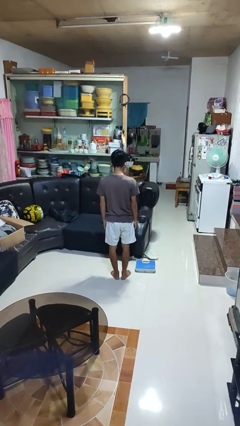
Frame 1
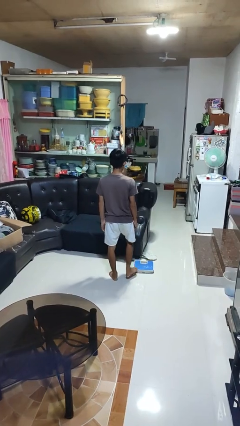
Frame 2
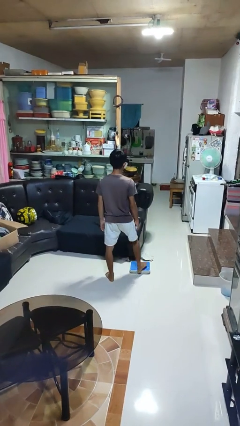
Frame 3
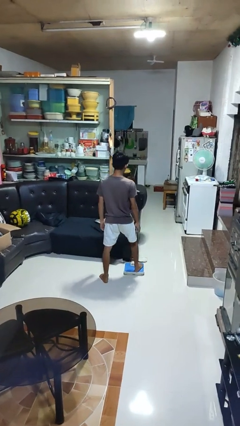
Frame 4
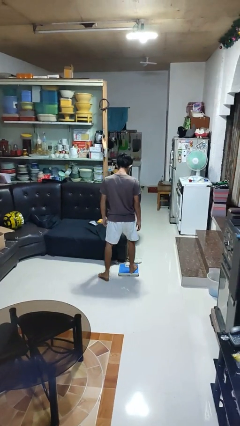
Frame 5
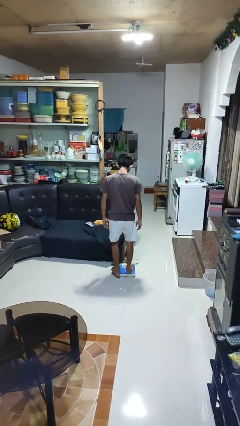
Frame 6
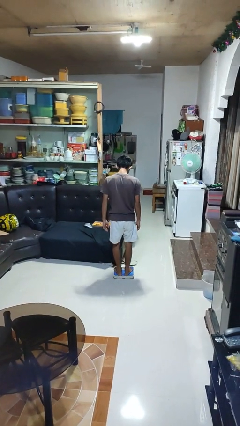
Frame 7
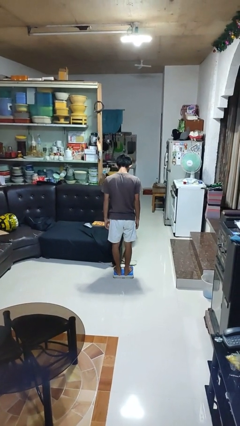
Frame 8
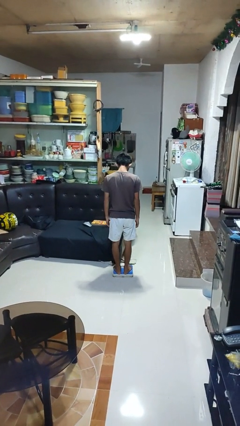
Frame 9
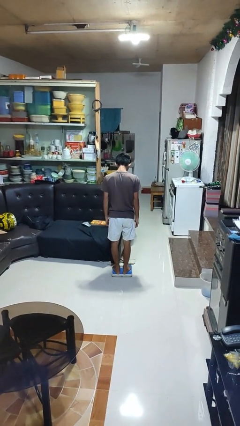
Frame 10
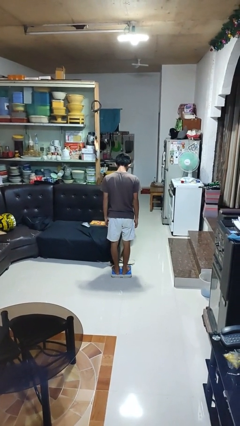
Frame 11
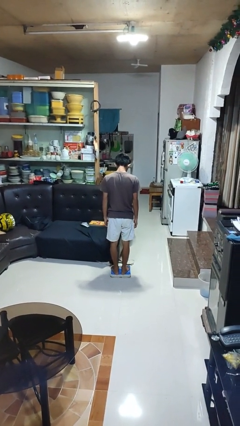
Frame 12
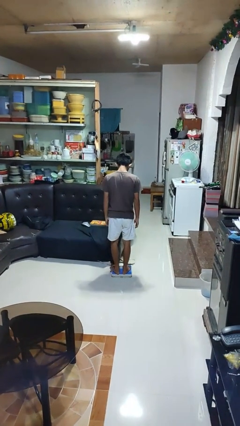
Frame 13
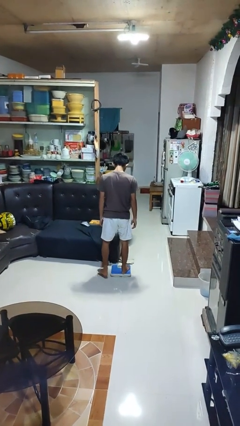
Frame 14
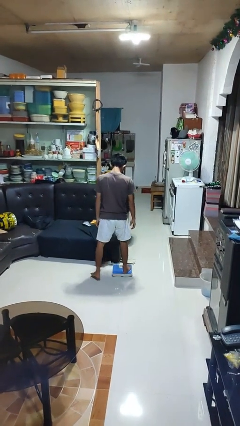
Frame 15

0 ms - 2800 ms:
person uses bodyweight scale

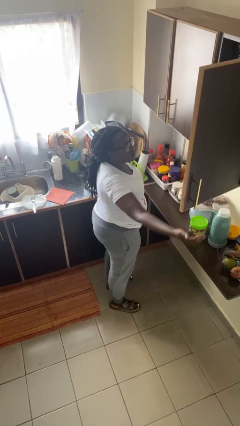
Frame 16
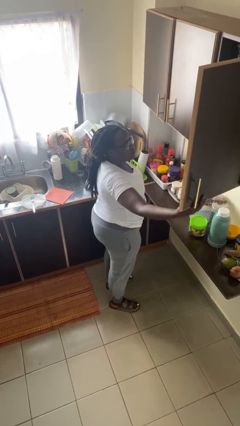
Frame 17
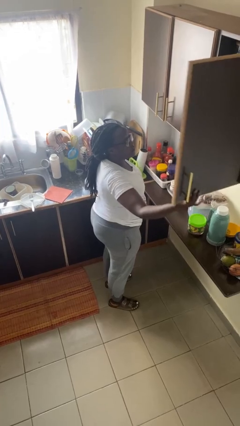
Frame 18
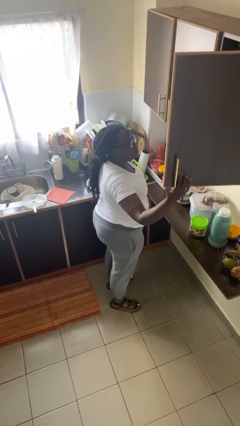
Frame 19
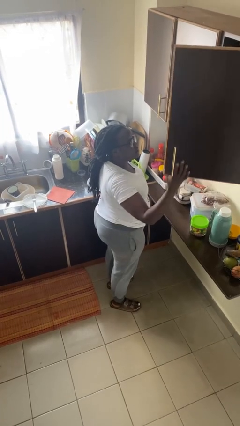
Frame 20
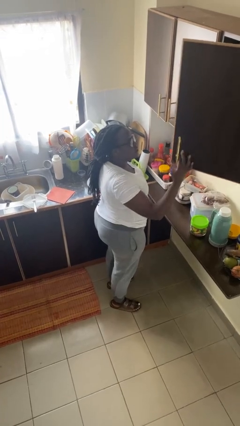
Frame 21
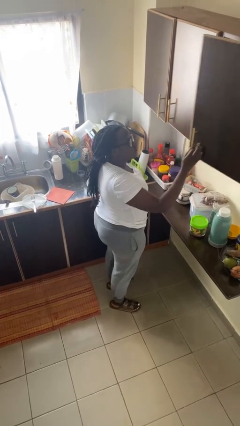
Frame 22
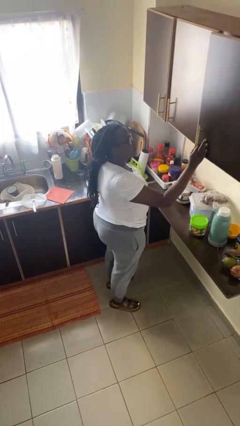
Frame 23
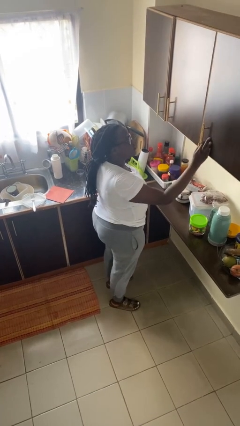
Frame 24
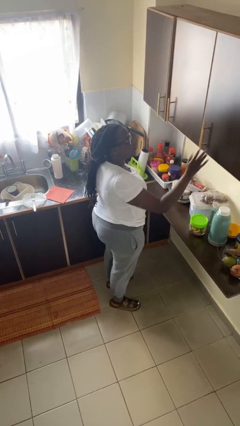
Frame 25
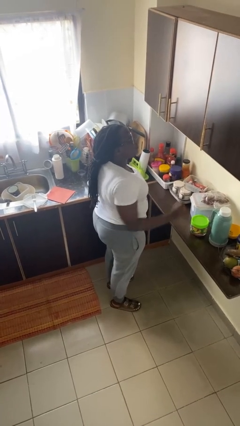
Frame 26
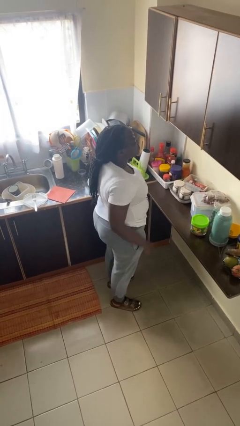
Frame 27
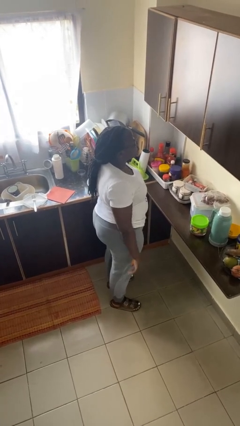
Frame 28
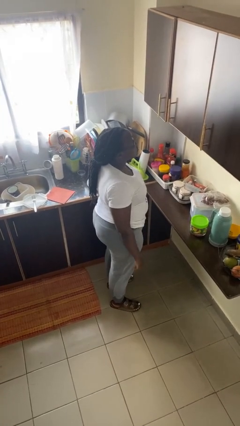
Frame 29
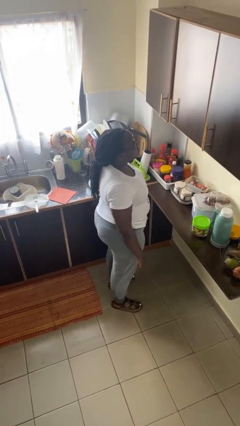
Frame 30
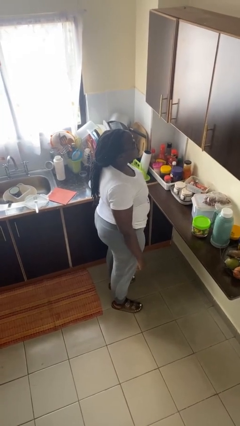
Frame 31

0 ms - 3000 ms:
person closes cabinet

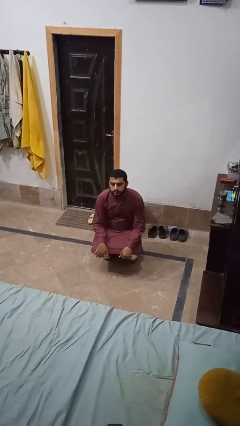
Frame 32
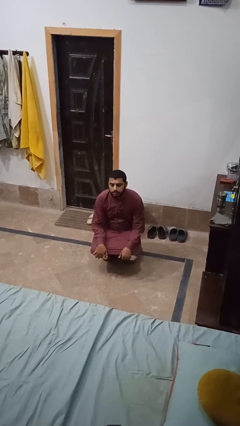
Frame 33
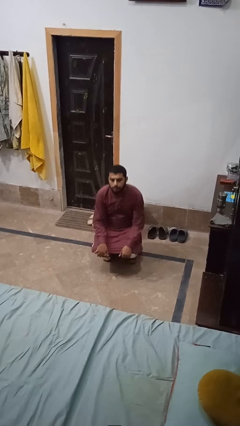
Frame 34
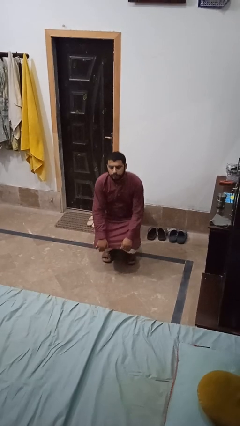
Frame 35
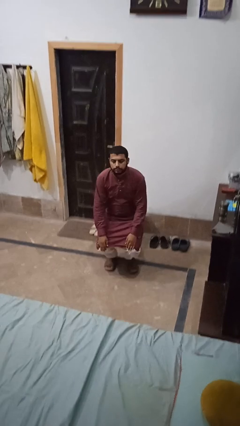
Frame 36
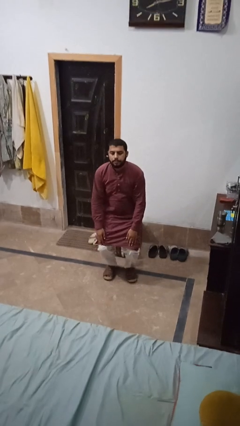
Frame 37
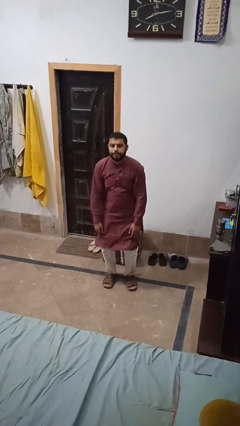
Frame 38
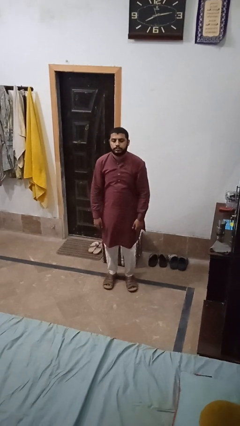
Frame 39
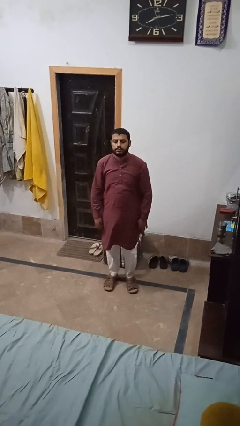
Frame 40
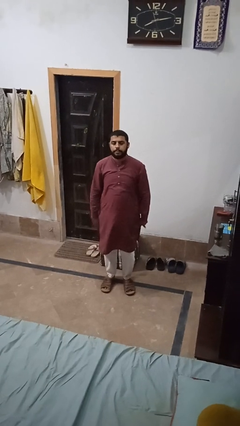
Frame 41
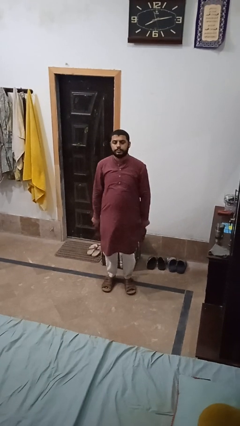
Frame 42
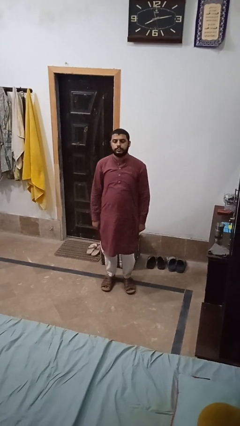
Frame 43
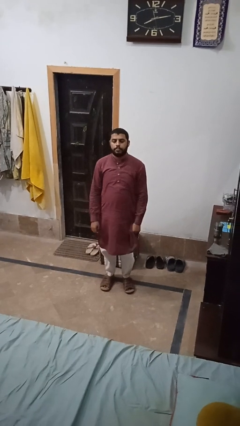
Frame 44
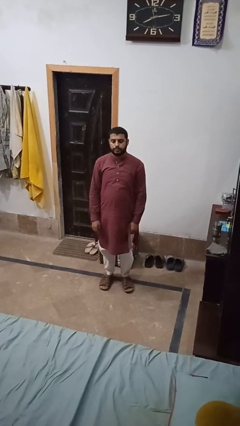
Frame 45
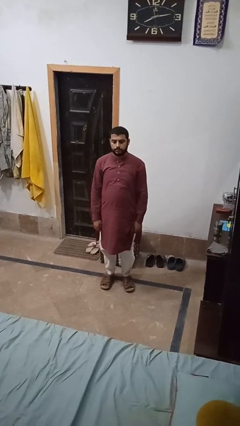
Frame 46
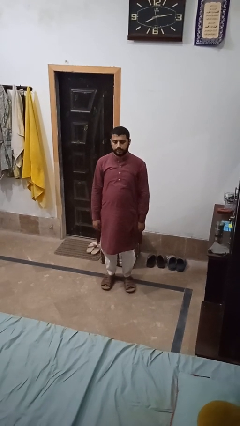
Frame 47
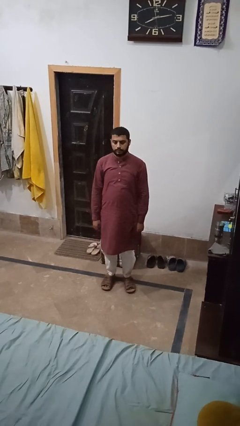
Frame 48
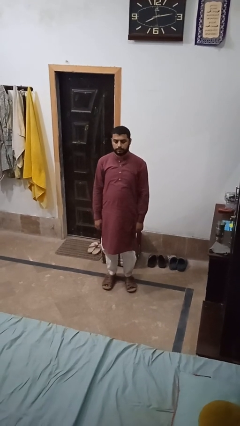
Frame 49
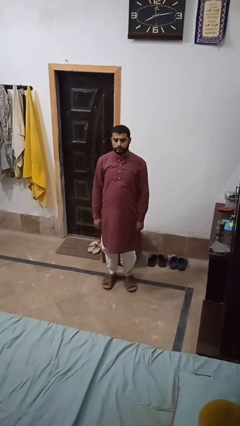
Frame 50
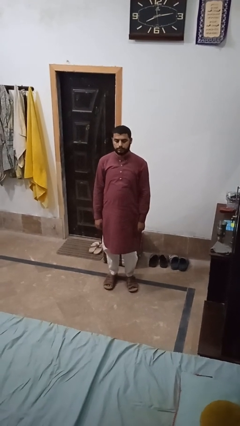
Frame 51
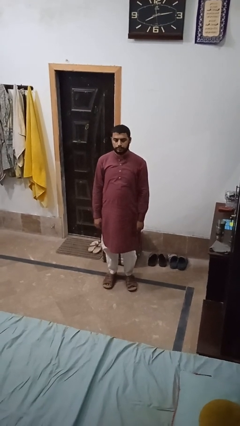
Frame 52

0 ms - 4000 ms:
person stands up

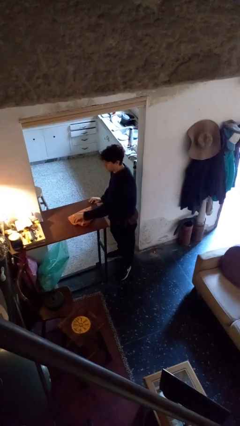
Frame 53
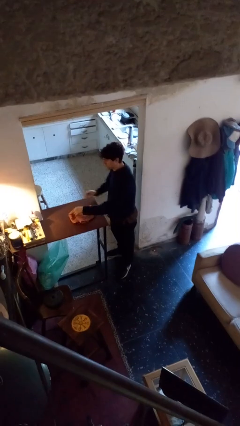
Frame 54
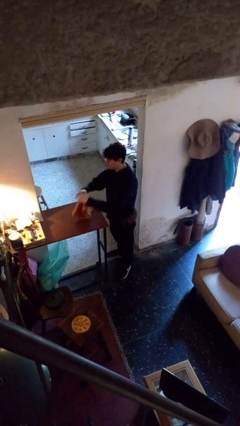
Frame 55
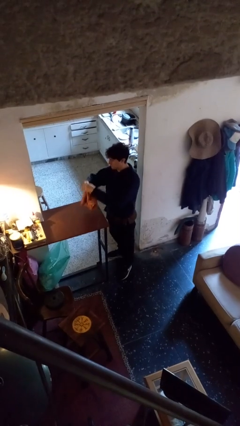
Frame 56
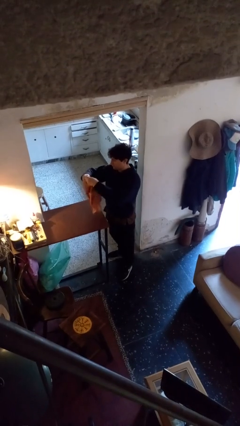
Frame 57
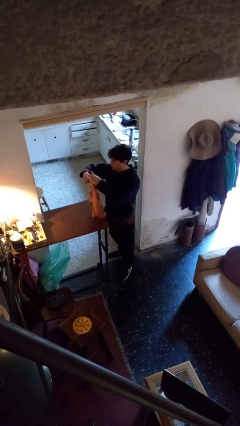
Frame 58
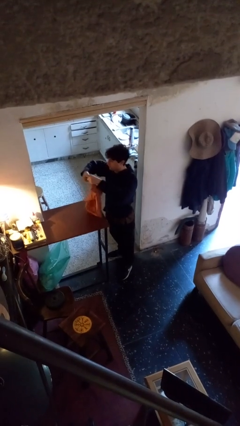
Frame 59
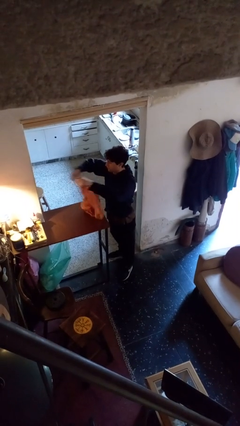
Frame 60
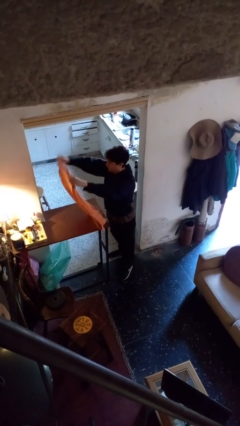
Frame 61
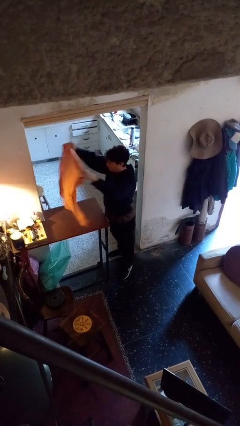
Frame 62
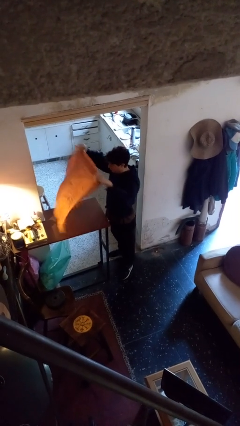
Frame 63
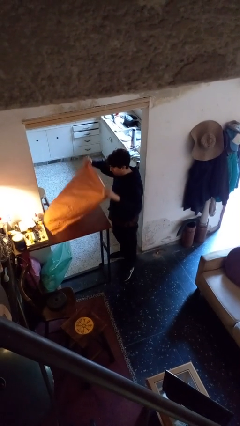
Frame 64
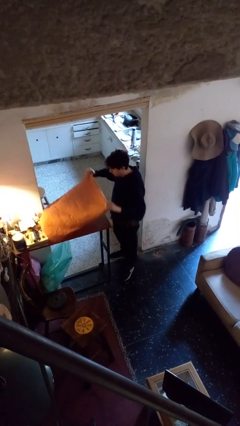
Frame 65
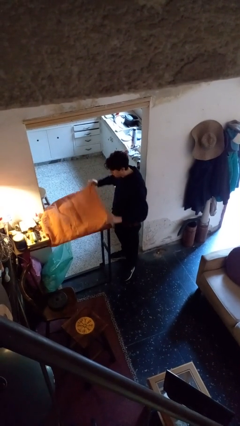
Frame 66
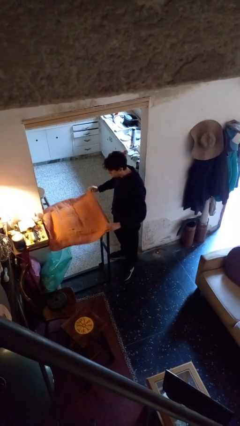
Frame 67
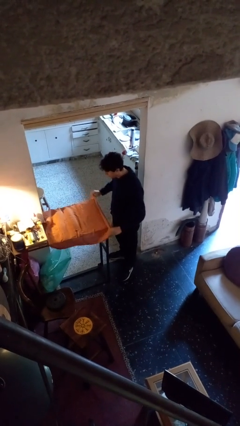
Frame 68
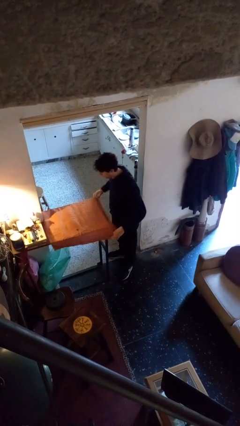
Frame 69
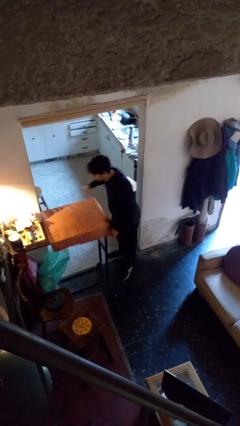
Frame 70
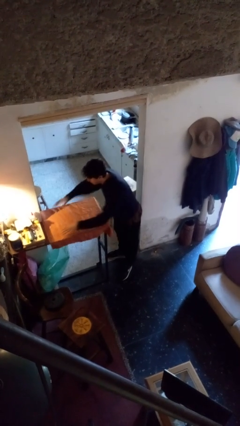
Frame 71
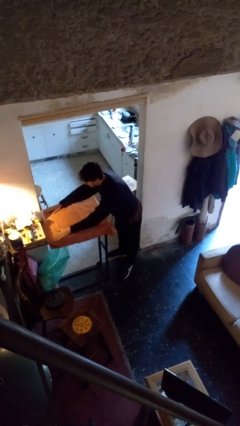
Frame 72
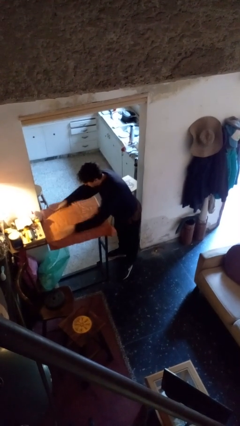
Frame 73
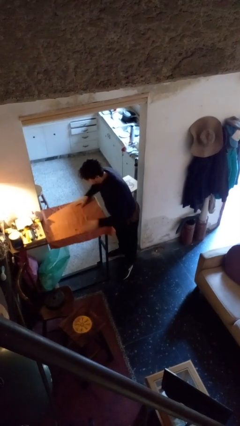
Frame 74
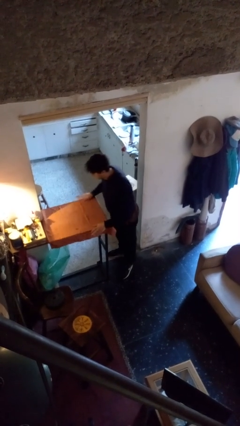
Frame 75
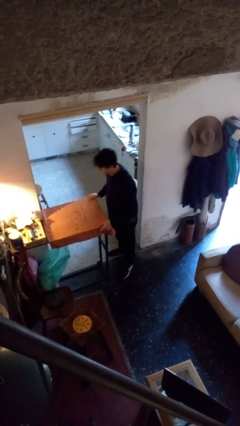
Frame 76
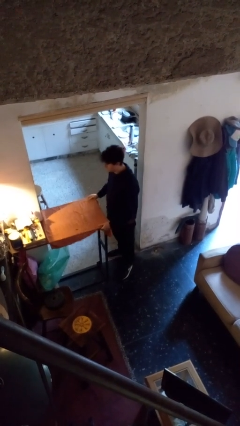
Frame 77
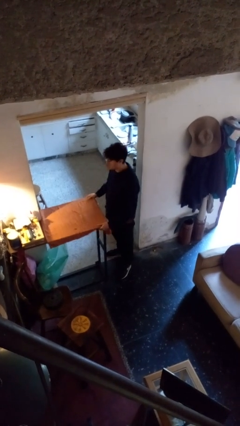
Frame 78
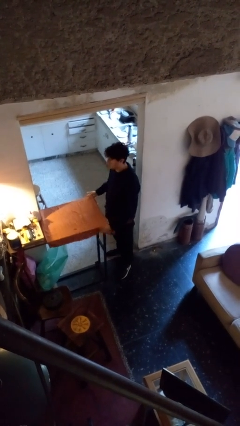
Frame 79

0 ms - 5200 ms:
person spreads tablecloth

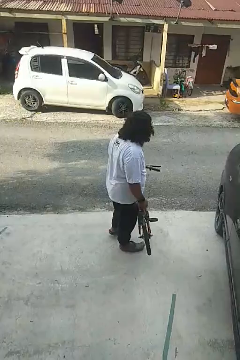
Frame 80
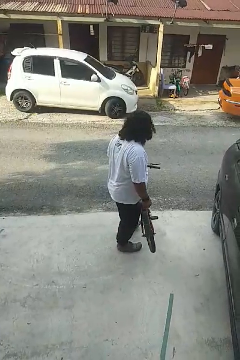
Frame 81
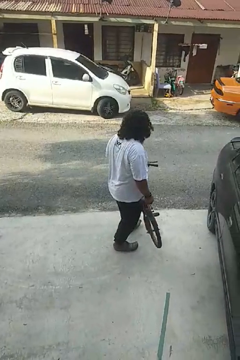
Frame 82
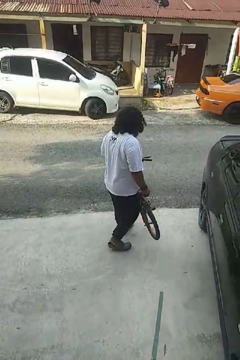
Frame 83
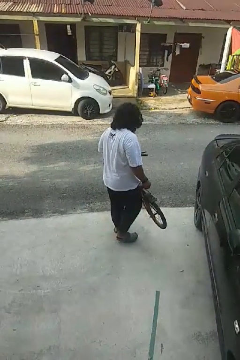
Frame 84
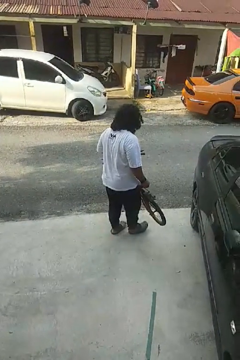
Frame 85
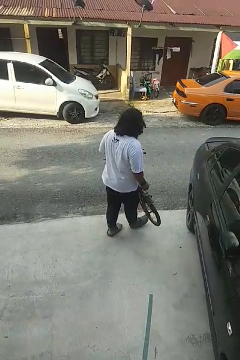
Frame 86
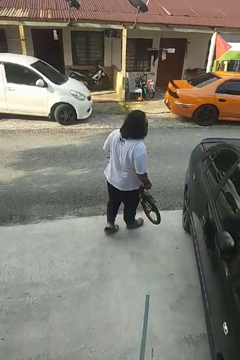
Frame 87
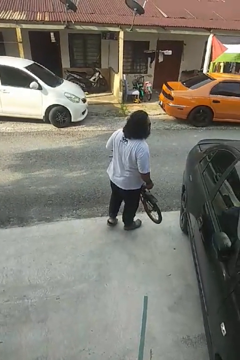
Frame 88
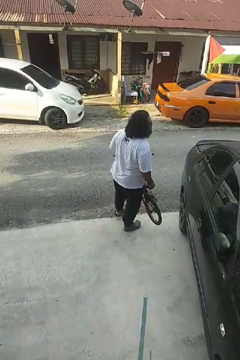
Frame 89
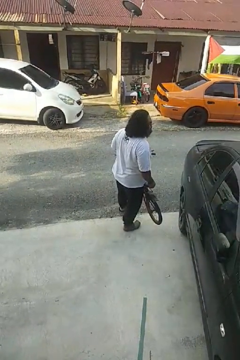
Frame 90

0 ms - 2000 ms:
person carries bicycle

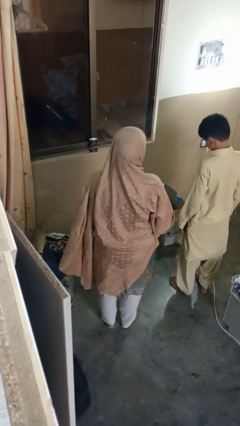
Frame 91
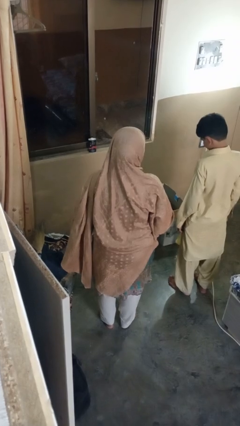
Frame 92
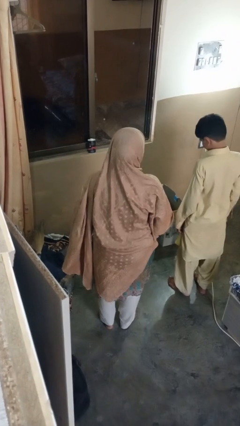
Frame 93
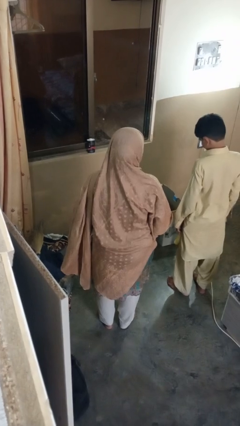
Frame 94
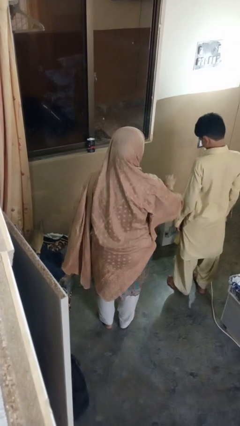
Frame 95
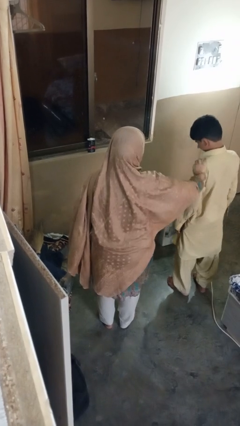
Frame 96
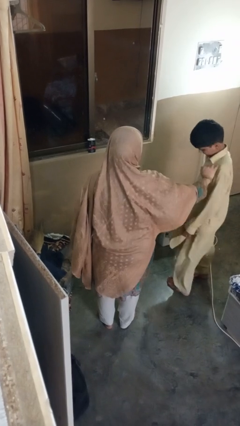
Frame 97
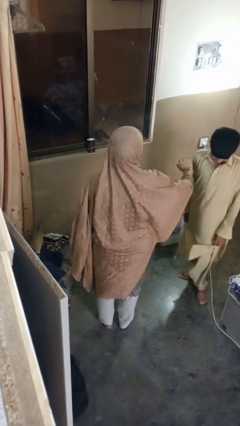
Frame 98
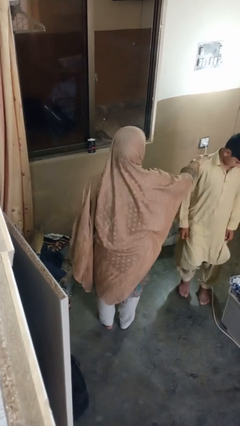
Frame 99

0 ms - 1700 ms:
person grabs person by shoulder
